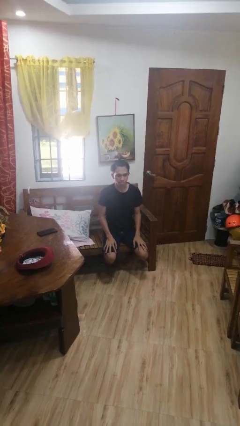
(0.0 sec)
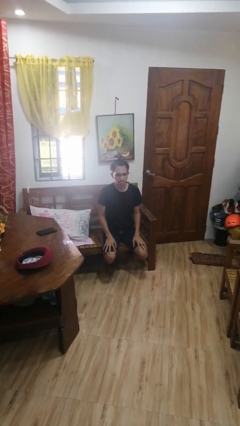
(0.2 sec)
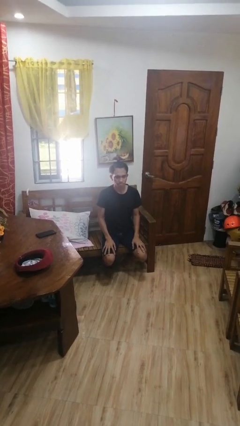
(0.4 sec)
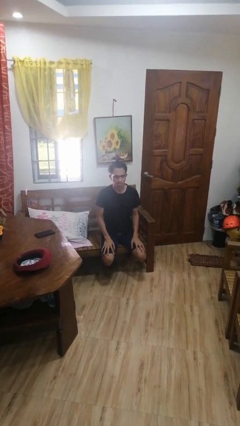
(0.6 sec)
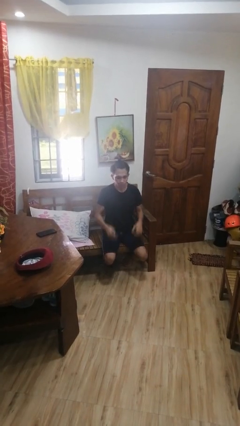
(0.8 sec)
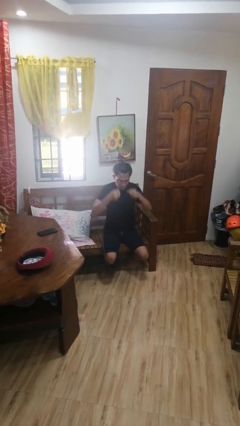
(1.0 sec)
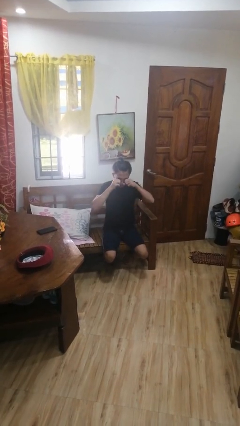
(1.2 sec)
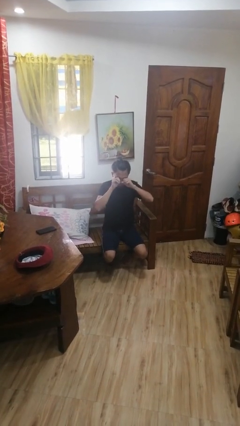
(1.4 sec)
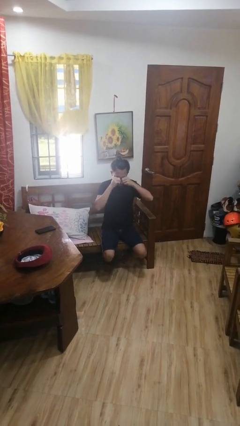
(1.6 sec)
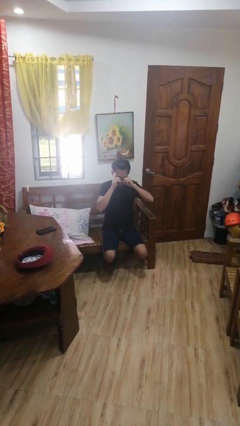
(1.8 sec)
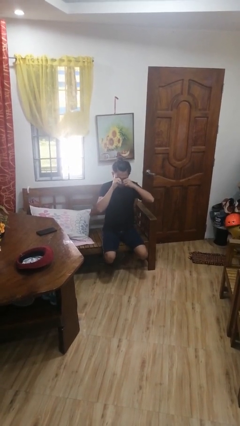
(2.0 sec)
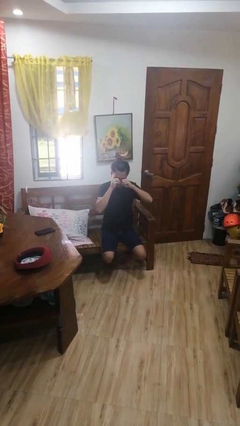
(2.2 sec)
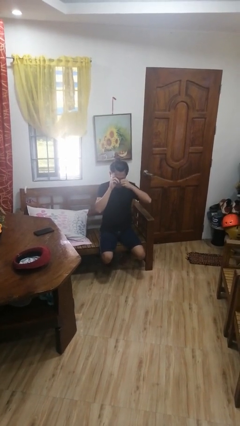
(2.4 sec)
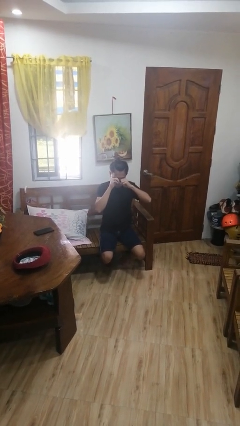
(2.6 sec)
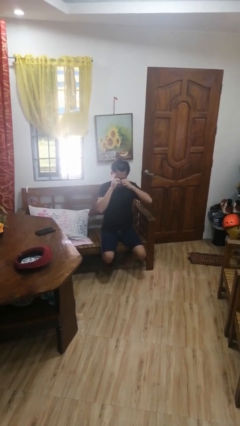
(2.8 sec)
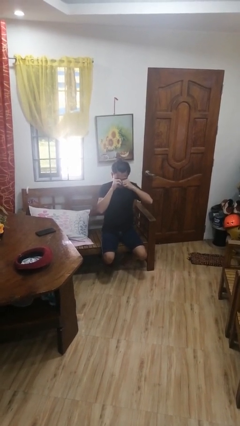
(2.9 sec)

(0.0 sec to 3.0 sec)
person rubs eyes

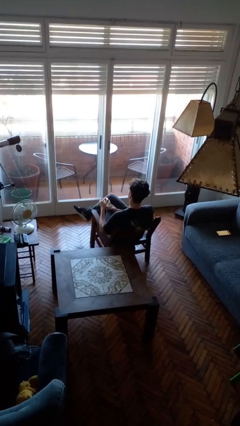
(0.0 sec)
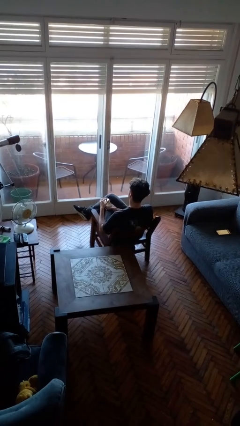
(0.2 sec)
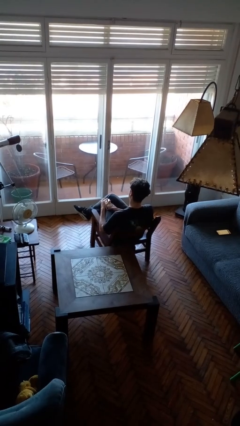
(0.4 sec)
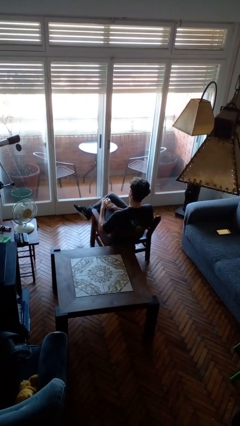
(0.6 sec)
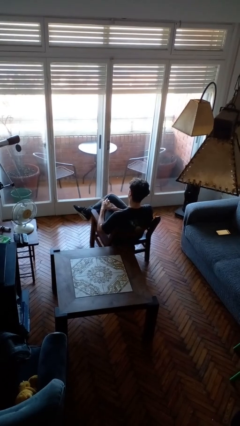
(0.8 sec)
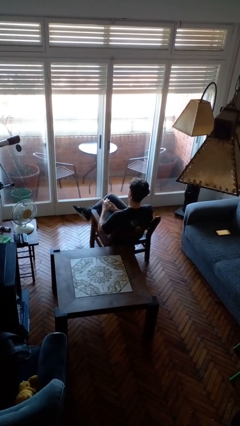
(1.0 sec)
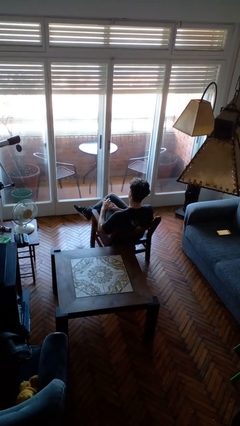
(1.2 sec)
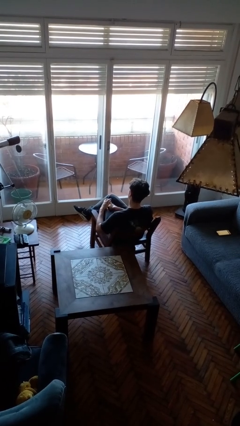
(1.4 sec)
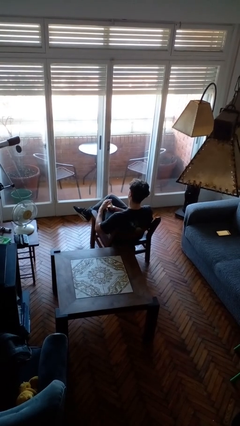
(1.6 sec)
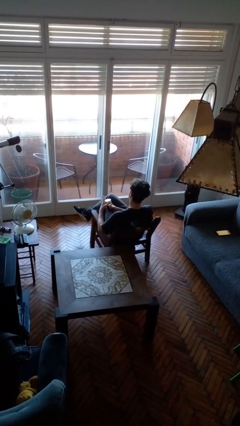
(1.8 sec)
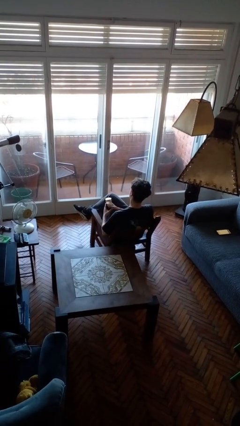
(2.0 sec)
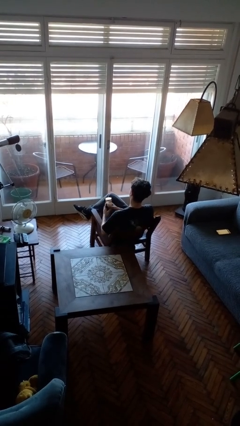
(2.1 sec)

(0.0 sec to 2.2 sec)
person closes jar

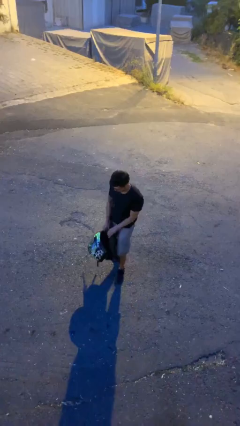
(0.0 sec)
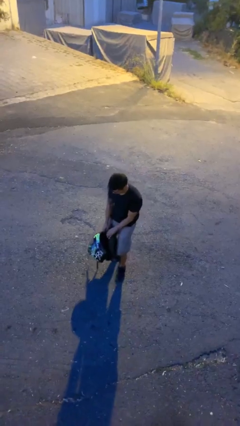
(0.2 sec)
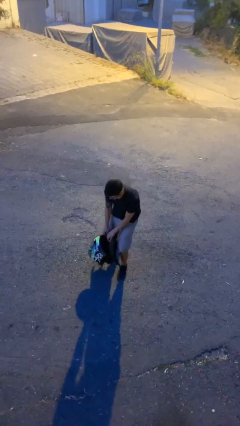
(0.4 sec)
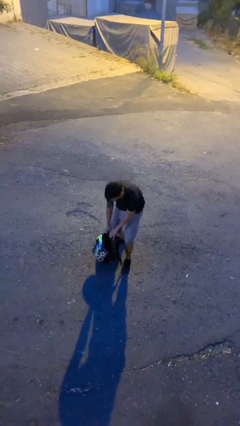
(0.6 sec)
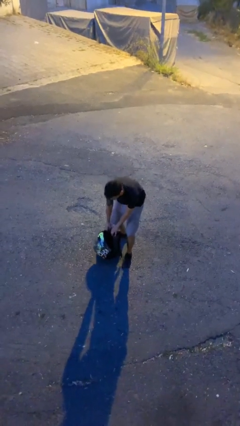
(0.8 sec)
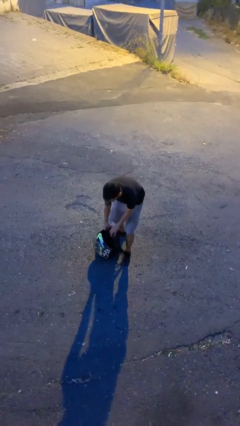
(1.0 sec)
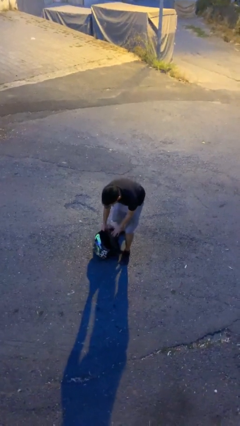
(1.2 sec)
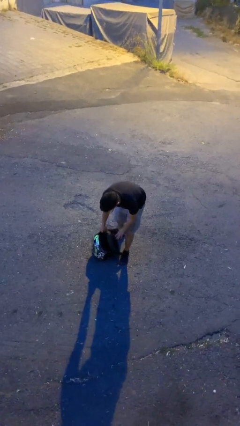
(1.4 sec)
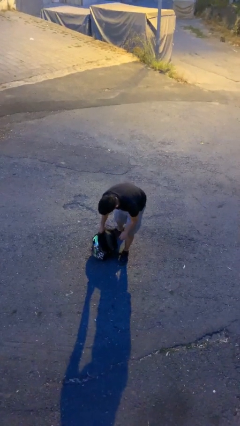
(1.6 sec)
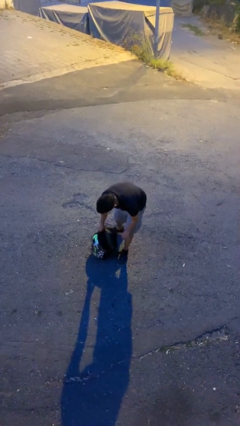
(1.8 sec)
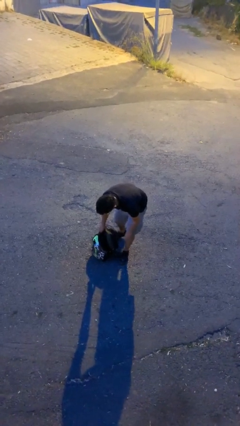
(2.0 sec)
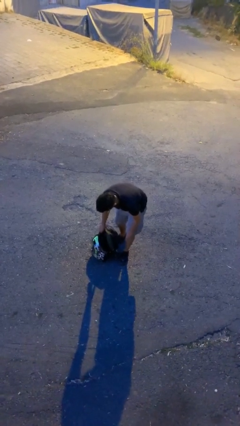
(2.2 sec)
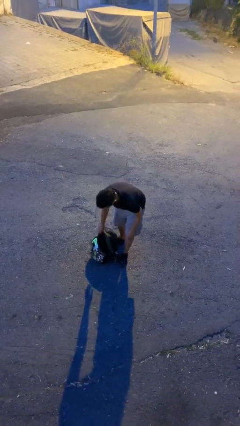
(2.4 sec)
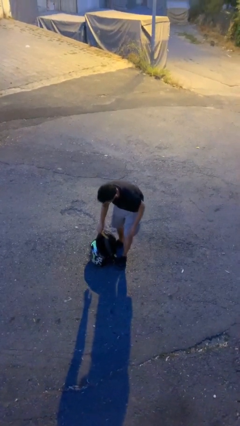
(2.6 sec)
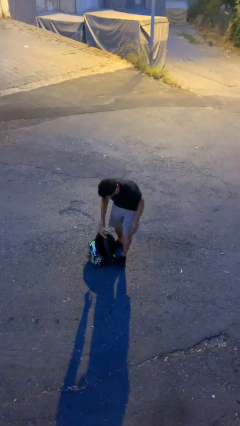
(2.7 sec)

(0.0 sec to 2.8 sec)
person puts down object on floor

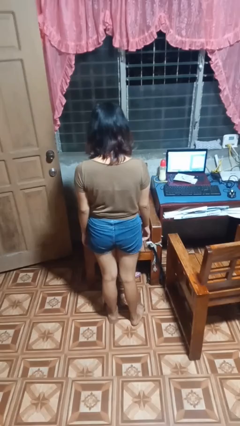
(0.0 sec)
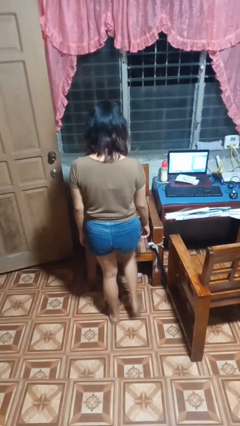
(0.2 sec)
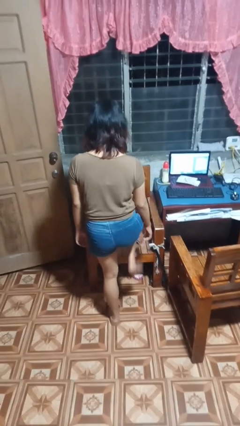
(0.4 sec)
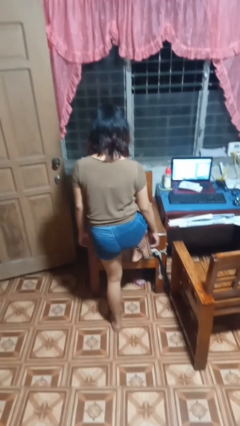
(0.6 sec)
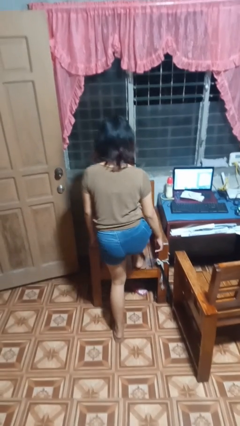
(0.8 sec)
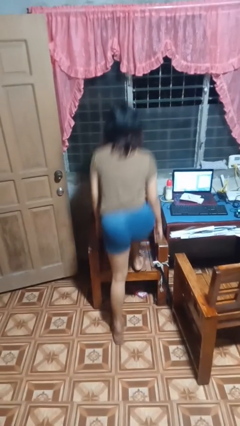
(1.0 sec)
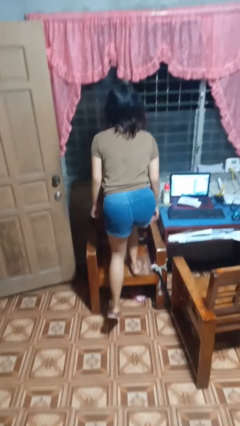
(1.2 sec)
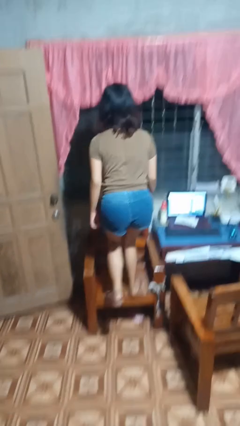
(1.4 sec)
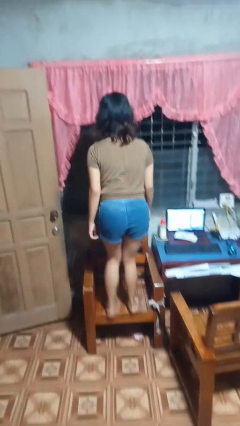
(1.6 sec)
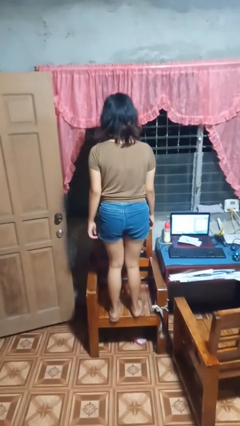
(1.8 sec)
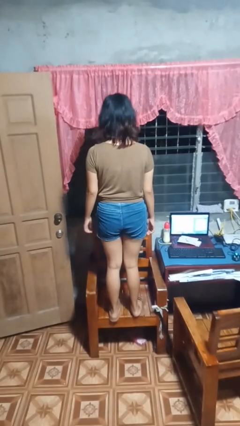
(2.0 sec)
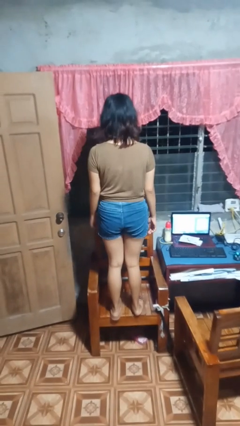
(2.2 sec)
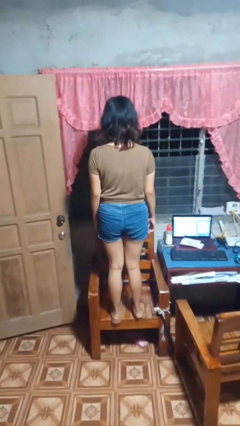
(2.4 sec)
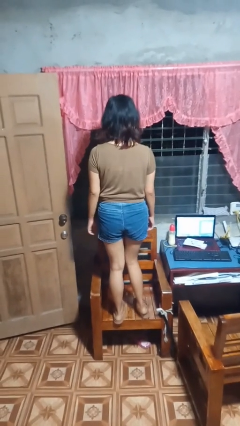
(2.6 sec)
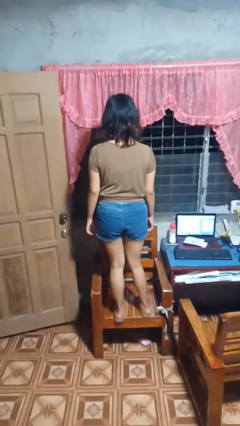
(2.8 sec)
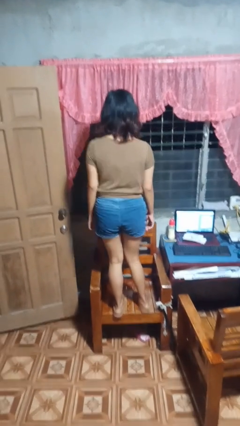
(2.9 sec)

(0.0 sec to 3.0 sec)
person climbs on chair

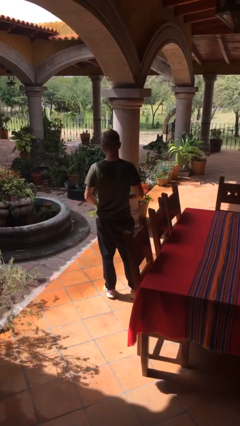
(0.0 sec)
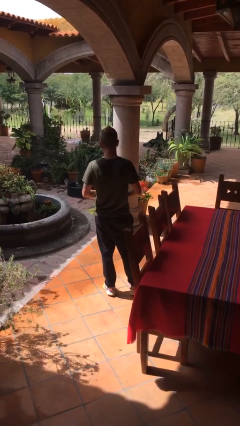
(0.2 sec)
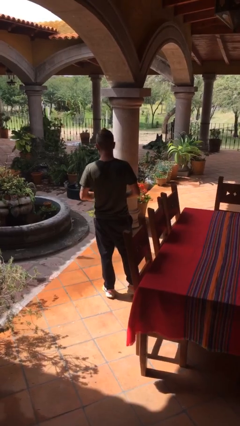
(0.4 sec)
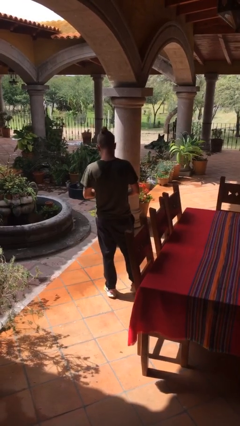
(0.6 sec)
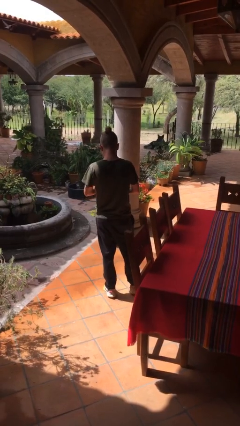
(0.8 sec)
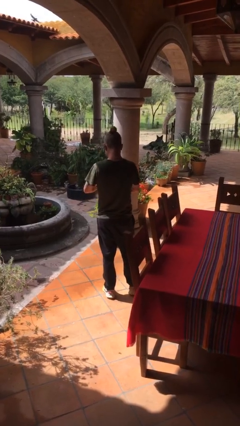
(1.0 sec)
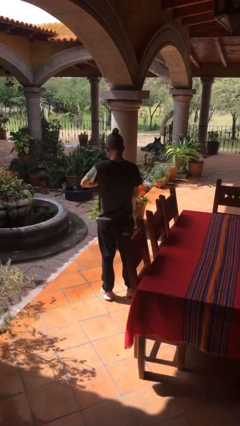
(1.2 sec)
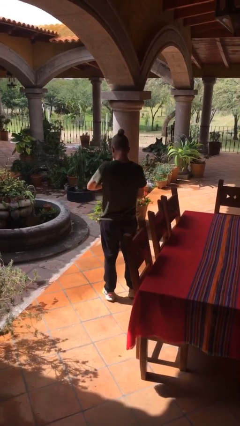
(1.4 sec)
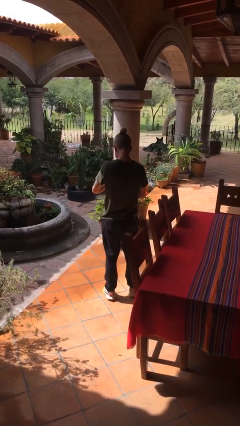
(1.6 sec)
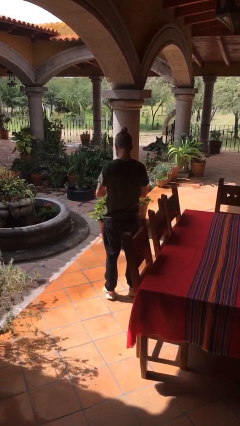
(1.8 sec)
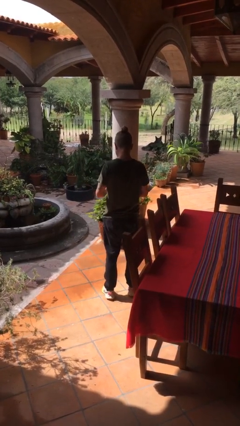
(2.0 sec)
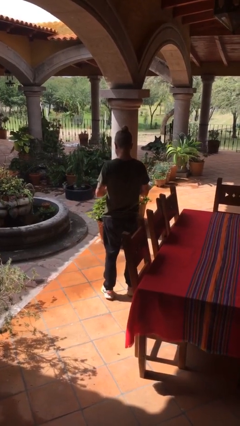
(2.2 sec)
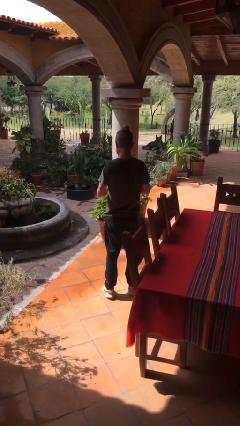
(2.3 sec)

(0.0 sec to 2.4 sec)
person opens beverage can

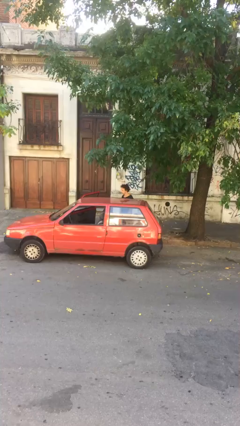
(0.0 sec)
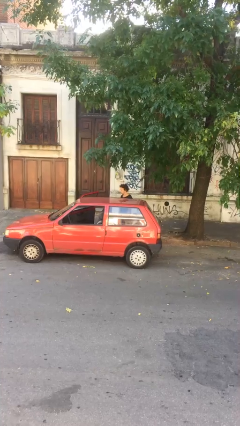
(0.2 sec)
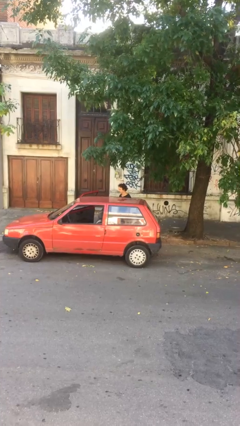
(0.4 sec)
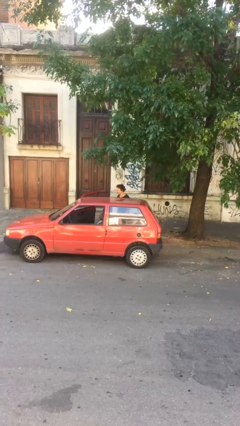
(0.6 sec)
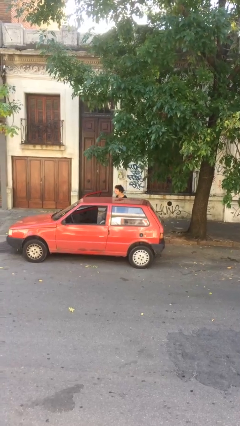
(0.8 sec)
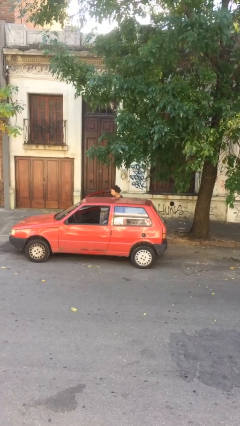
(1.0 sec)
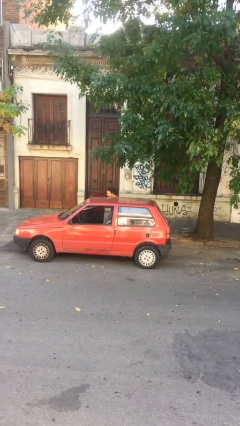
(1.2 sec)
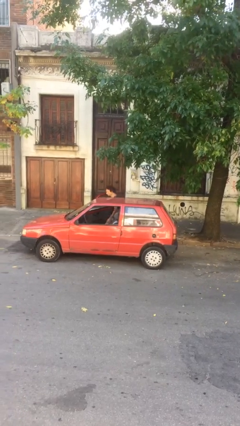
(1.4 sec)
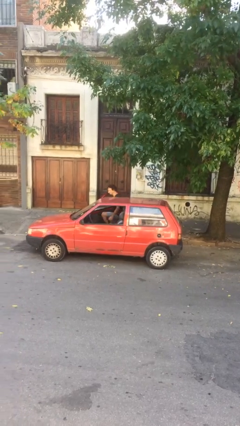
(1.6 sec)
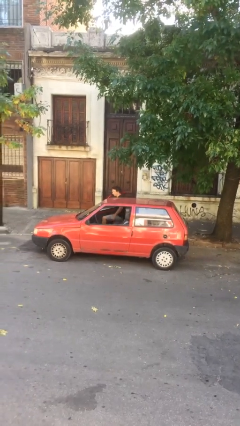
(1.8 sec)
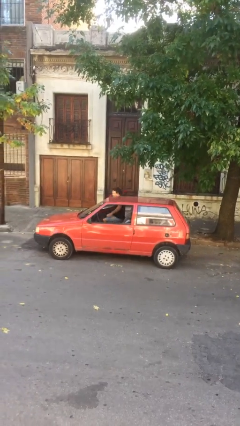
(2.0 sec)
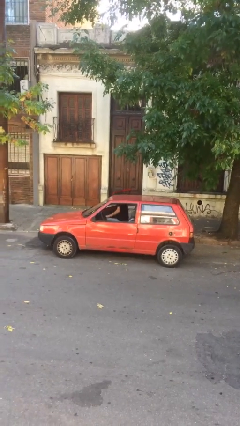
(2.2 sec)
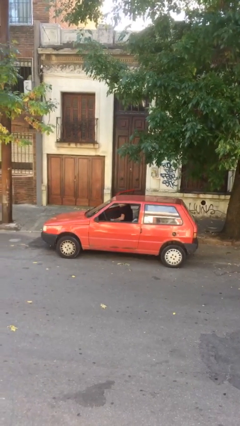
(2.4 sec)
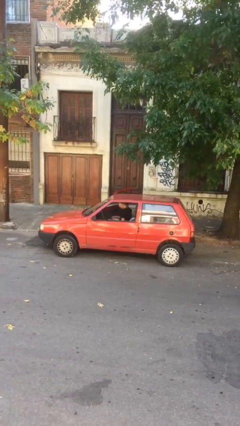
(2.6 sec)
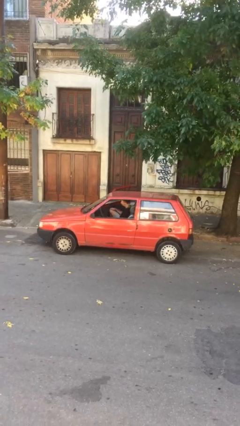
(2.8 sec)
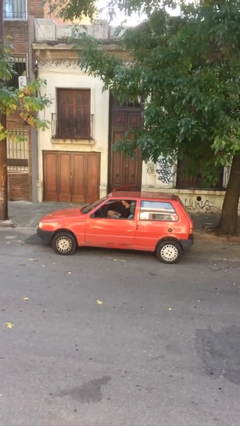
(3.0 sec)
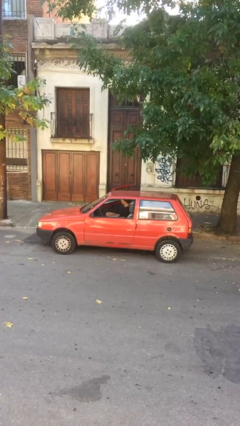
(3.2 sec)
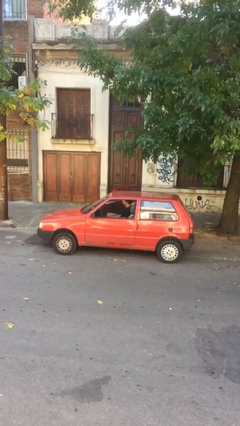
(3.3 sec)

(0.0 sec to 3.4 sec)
person enters car

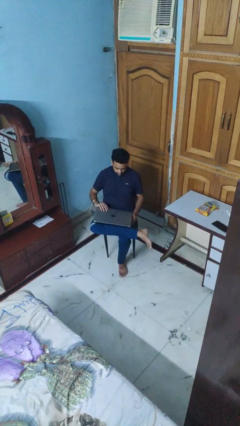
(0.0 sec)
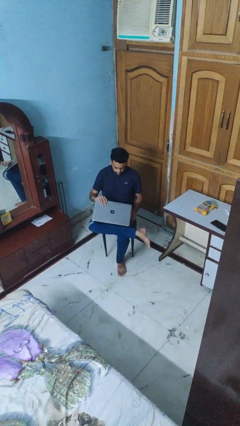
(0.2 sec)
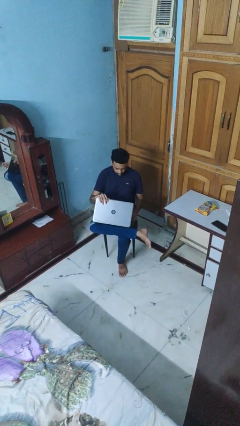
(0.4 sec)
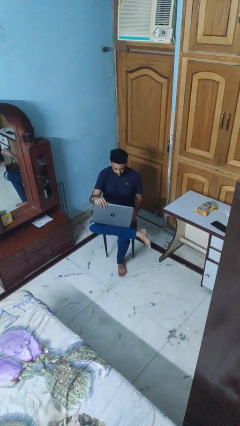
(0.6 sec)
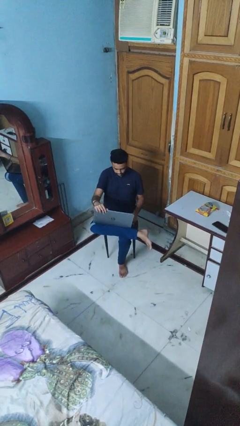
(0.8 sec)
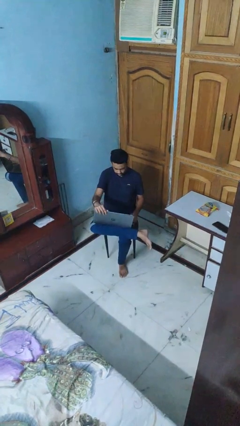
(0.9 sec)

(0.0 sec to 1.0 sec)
person opens laptop
